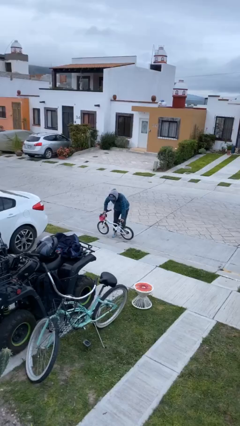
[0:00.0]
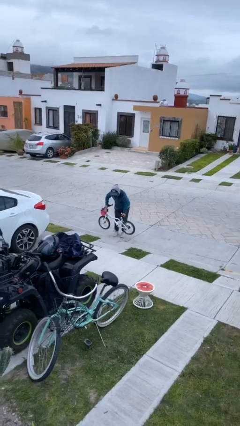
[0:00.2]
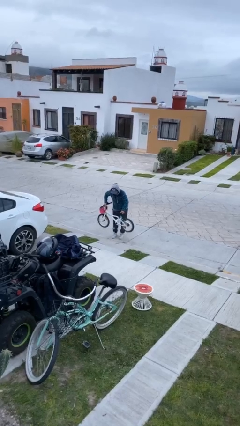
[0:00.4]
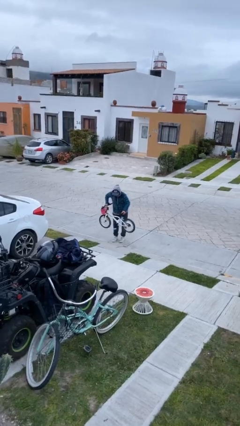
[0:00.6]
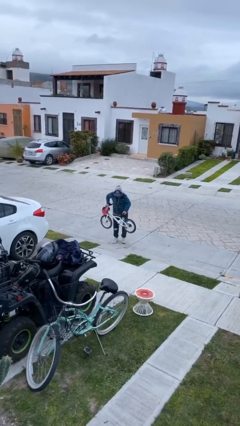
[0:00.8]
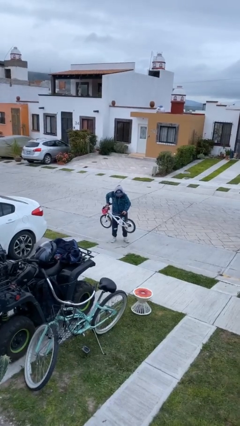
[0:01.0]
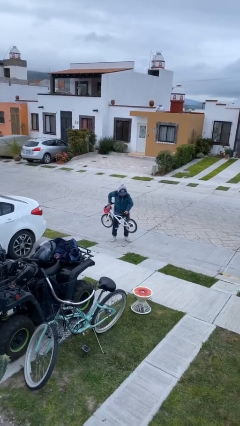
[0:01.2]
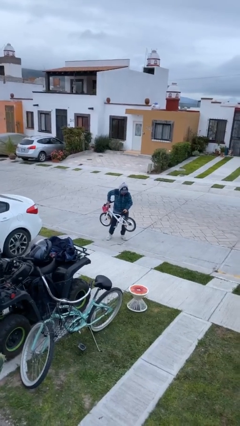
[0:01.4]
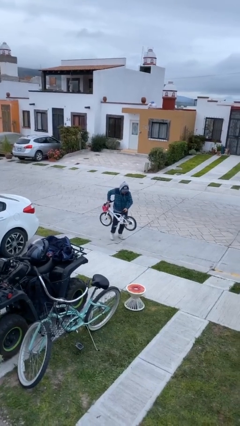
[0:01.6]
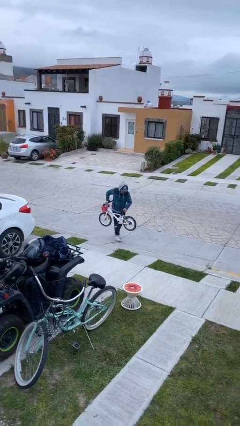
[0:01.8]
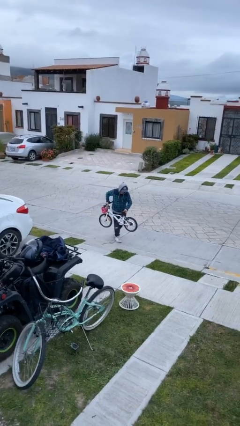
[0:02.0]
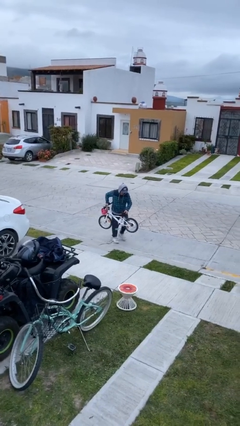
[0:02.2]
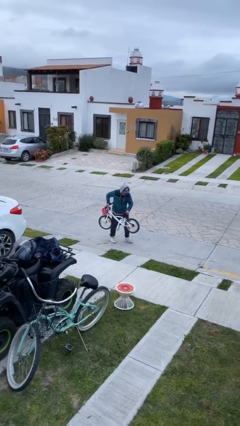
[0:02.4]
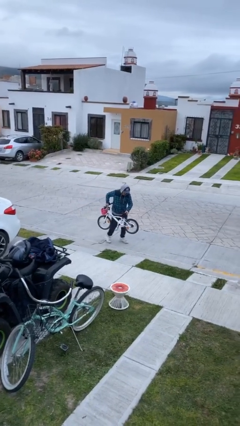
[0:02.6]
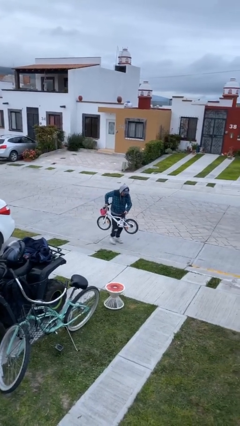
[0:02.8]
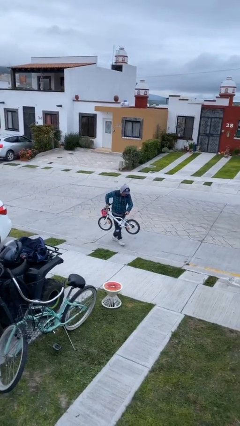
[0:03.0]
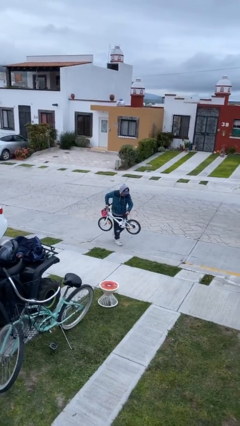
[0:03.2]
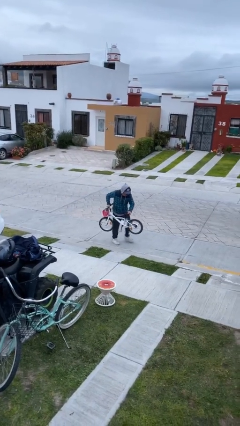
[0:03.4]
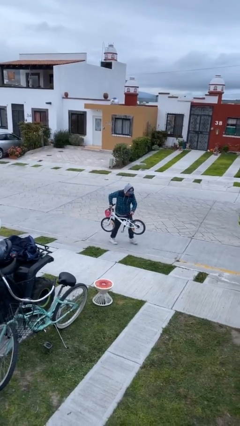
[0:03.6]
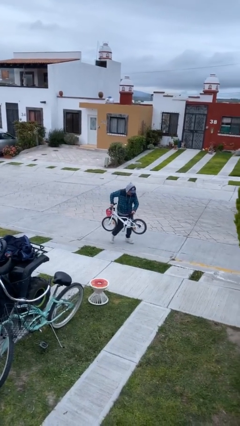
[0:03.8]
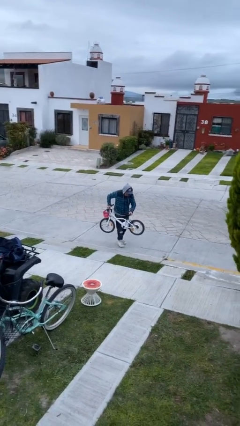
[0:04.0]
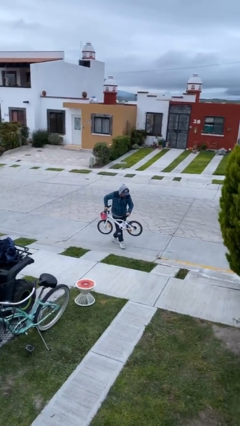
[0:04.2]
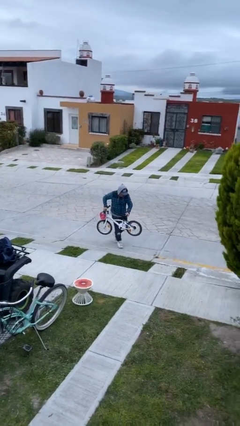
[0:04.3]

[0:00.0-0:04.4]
person carries heavy object

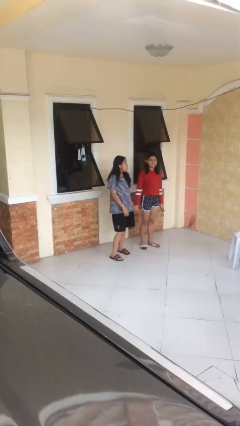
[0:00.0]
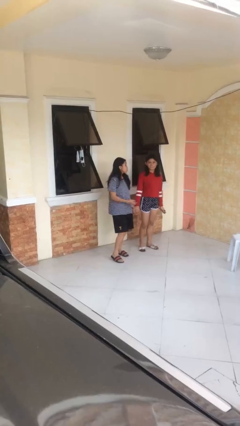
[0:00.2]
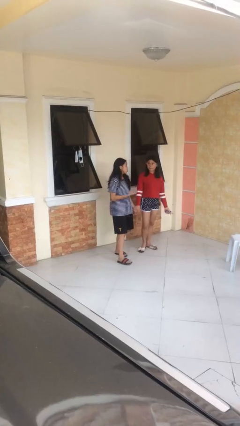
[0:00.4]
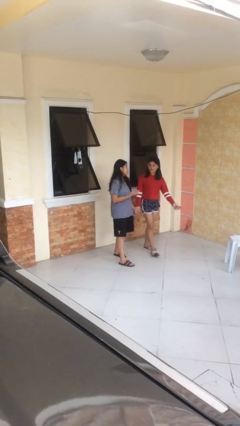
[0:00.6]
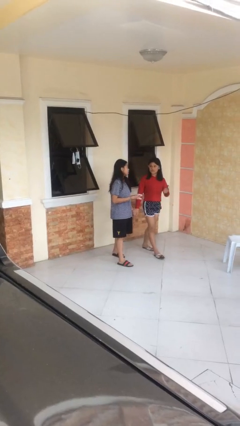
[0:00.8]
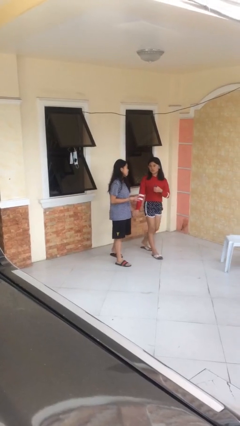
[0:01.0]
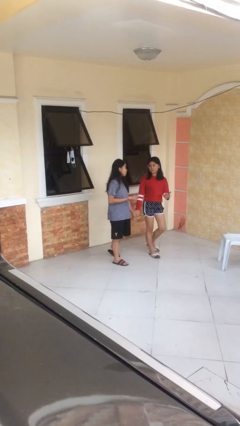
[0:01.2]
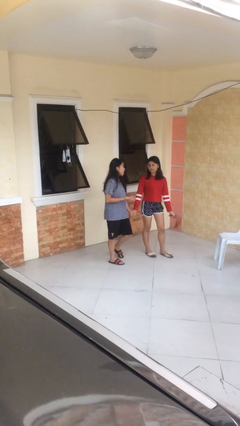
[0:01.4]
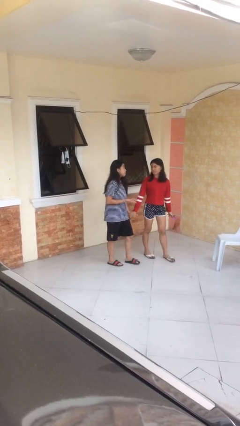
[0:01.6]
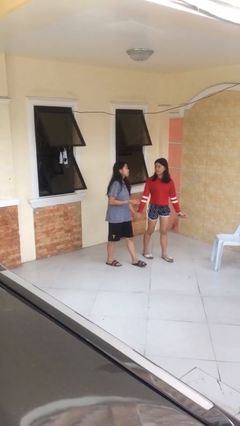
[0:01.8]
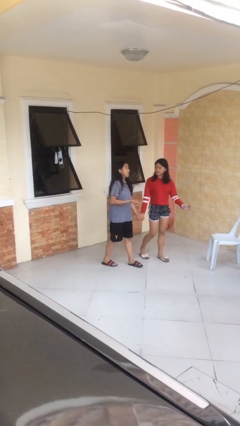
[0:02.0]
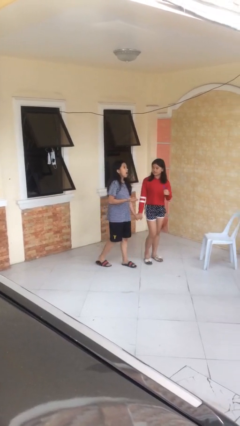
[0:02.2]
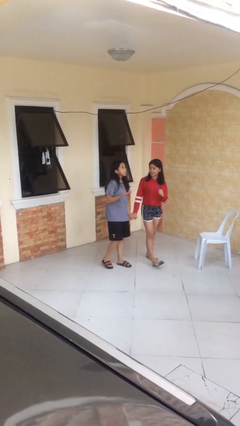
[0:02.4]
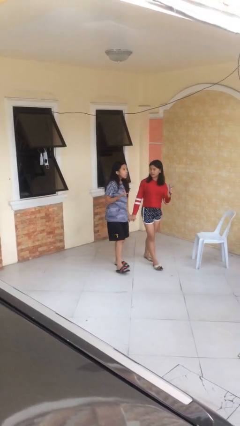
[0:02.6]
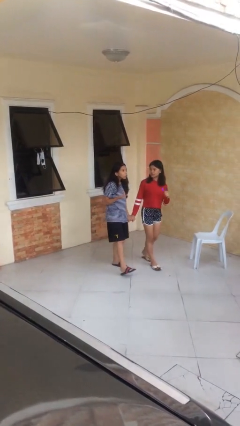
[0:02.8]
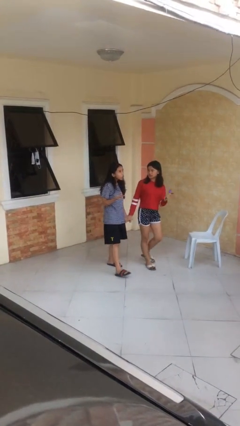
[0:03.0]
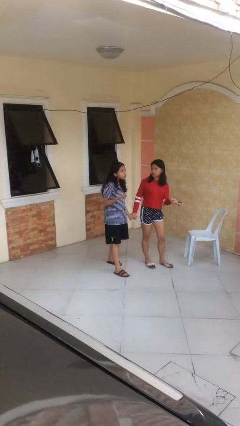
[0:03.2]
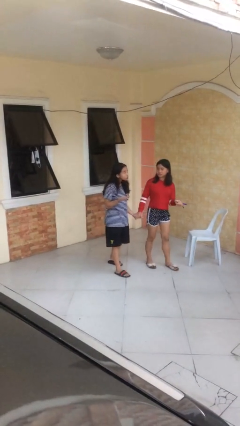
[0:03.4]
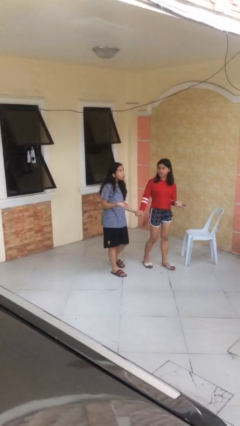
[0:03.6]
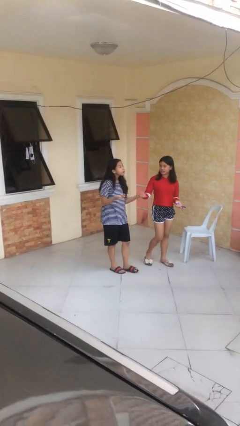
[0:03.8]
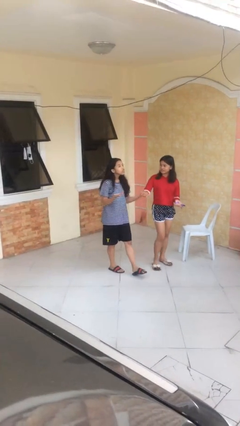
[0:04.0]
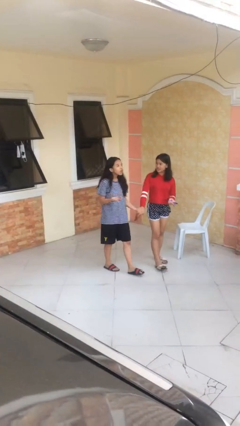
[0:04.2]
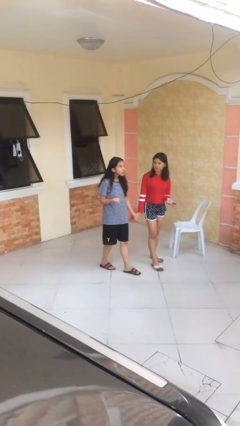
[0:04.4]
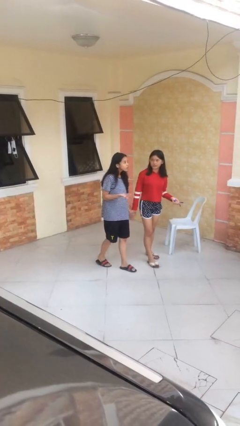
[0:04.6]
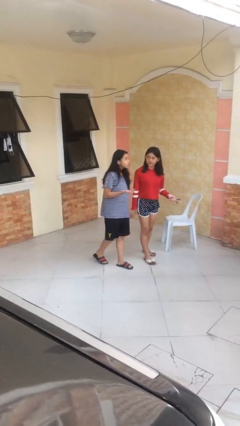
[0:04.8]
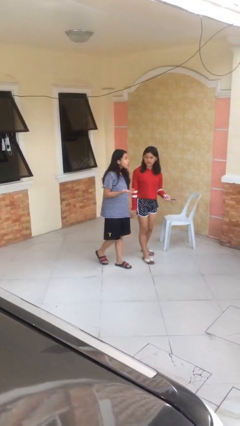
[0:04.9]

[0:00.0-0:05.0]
person holds hand

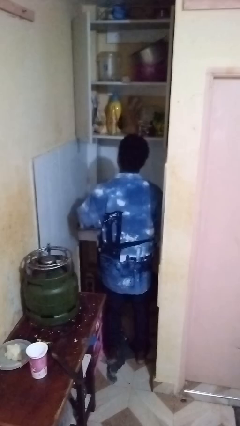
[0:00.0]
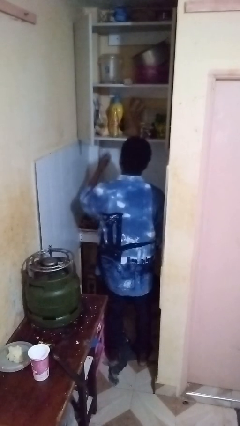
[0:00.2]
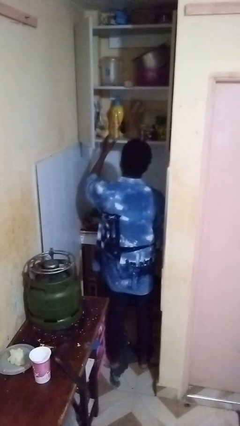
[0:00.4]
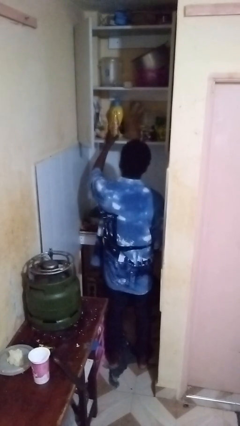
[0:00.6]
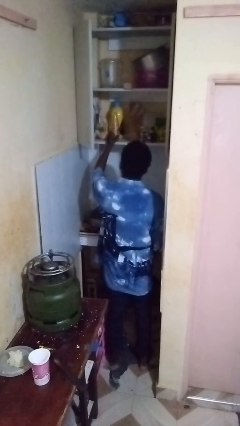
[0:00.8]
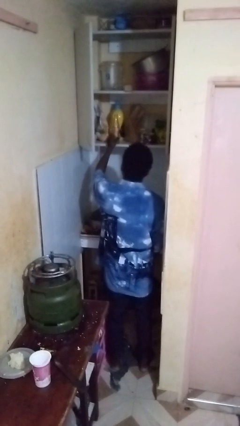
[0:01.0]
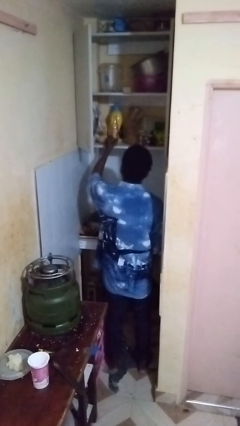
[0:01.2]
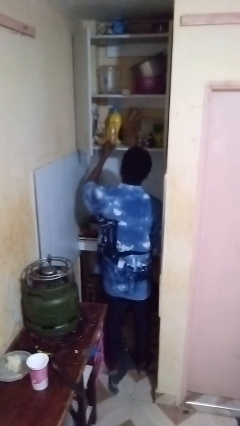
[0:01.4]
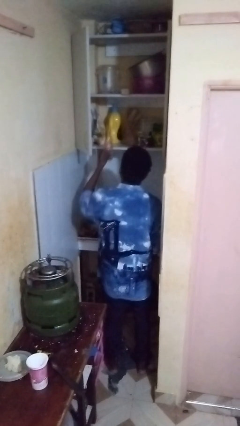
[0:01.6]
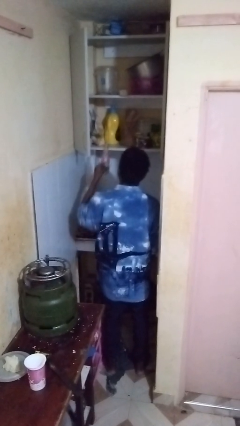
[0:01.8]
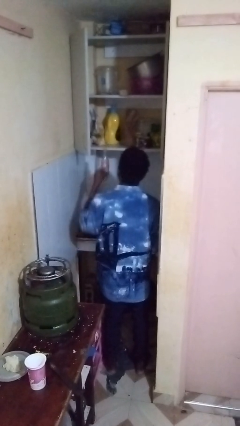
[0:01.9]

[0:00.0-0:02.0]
person picks up object from cabinet

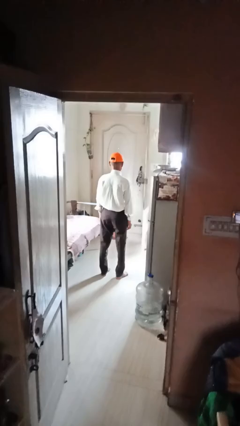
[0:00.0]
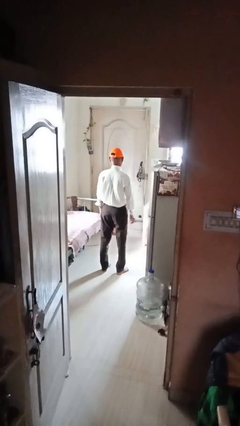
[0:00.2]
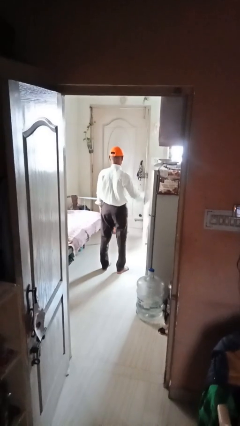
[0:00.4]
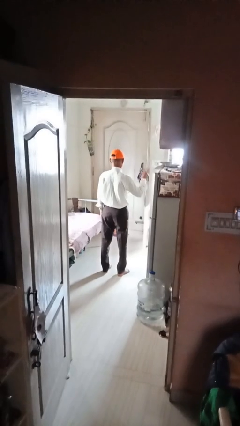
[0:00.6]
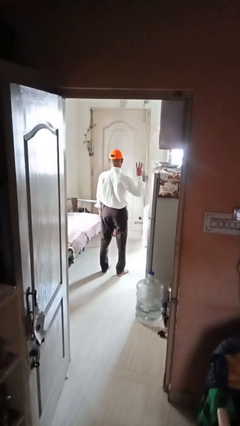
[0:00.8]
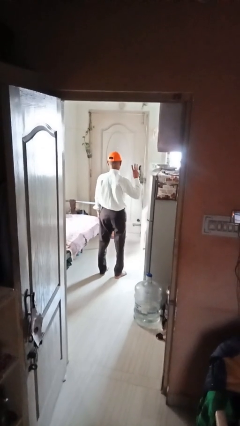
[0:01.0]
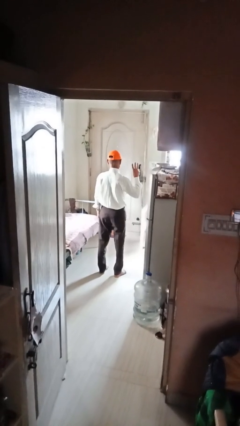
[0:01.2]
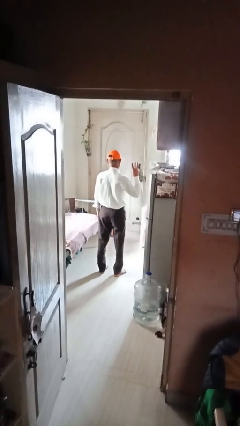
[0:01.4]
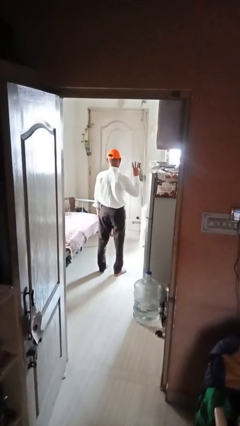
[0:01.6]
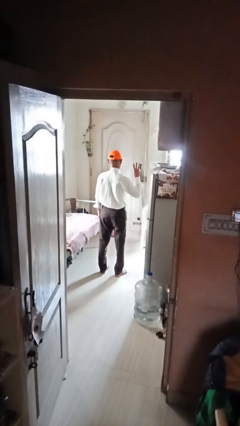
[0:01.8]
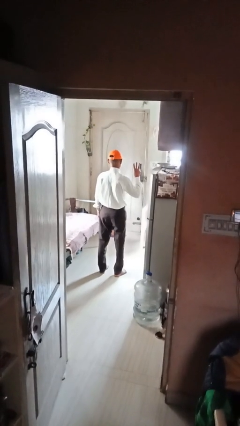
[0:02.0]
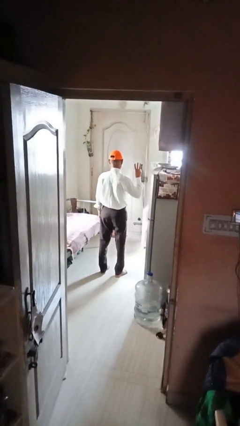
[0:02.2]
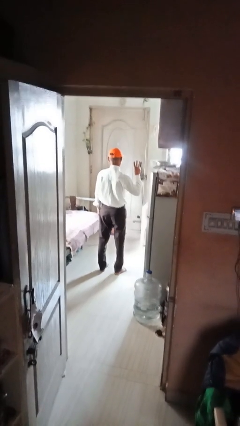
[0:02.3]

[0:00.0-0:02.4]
person gestures number three

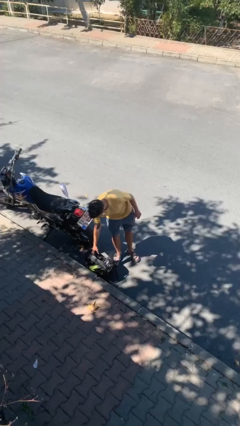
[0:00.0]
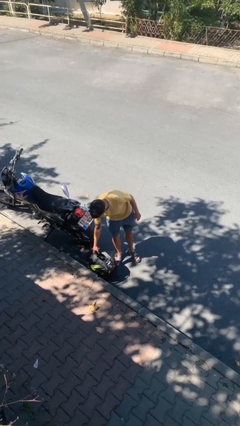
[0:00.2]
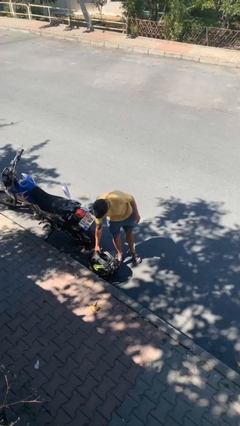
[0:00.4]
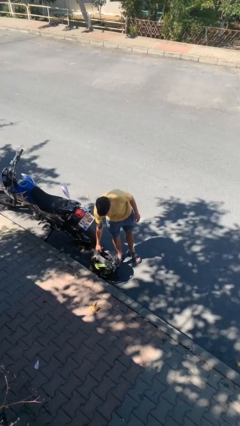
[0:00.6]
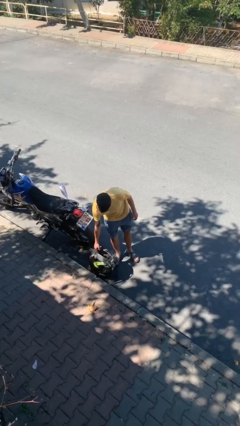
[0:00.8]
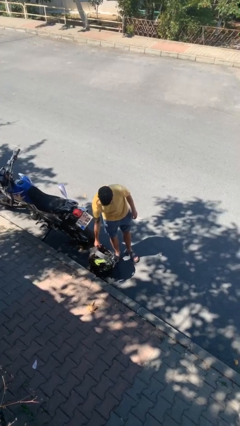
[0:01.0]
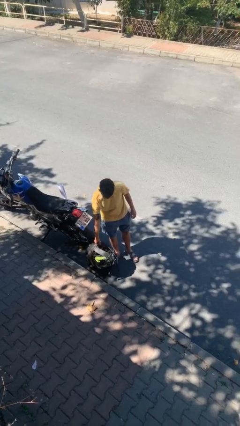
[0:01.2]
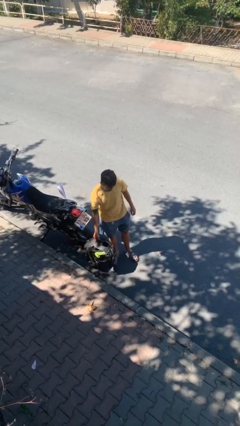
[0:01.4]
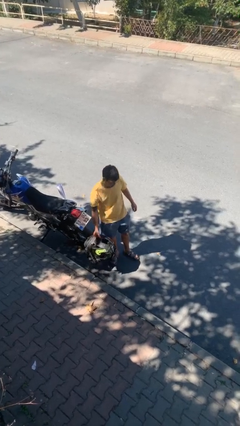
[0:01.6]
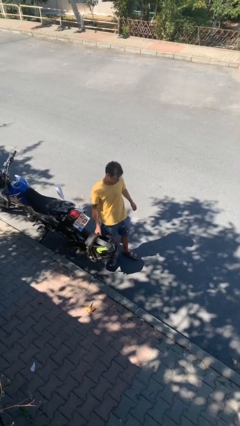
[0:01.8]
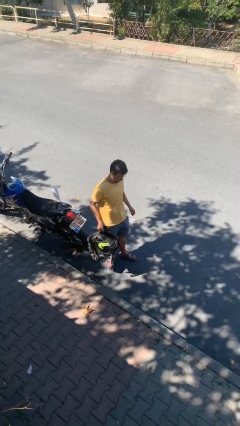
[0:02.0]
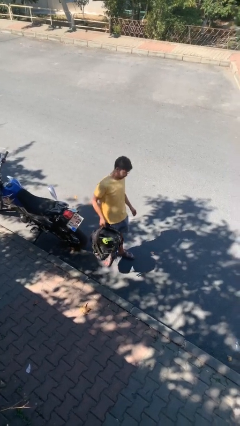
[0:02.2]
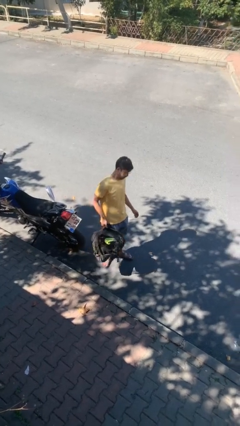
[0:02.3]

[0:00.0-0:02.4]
person picks up object from floor

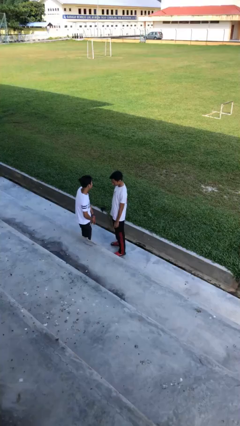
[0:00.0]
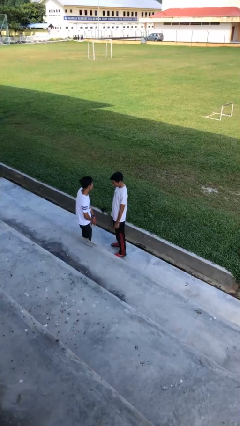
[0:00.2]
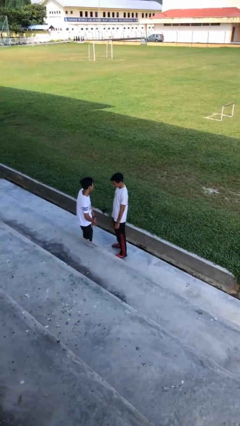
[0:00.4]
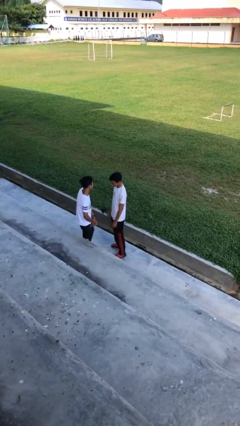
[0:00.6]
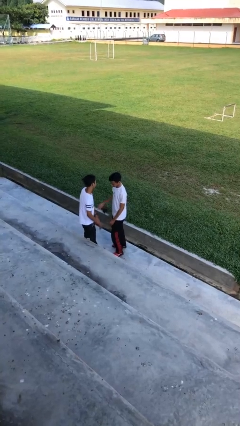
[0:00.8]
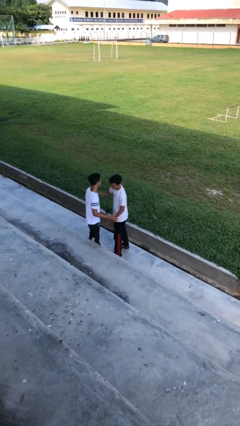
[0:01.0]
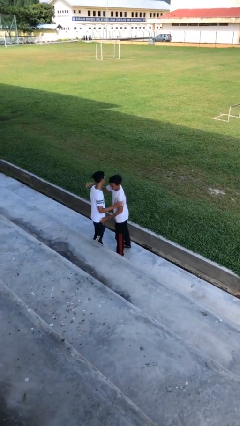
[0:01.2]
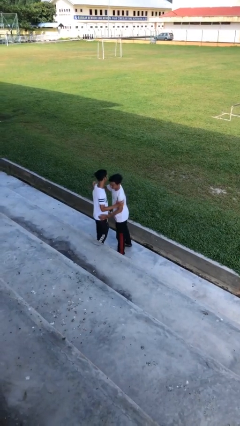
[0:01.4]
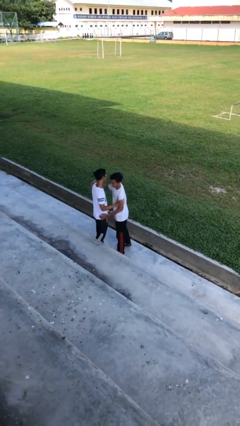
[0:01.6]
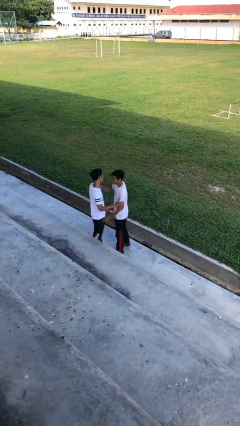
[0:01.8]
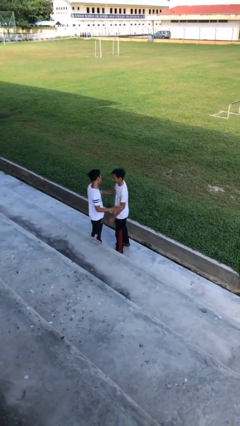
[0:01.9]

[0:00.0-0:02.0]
person embraces person
